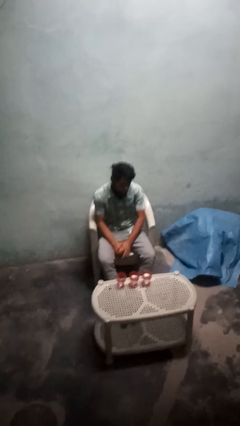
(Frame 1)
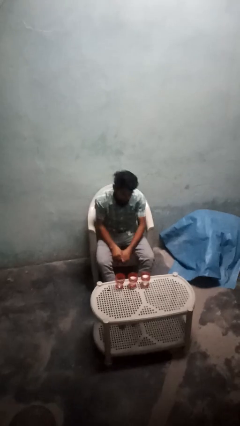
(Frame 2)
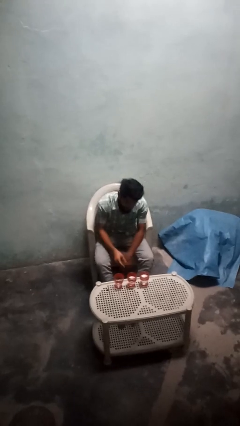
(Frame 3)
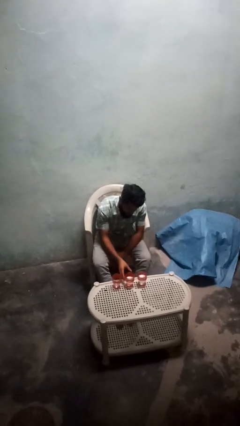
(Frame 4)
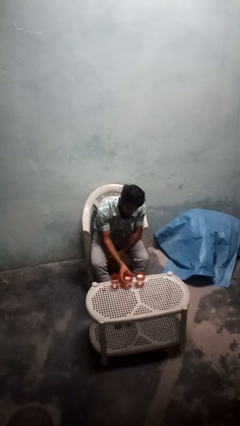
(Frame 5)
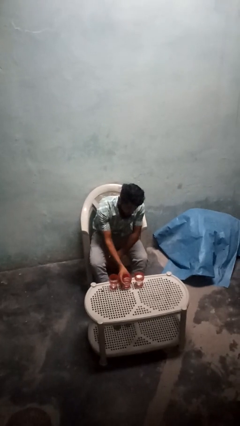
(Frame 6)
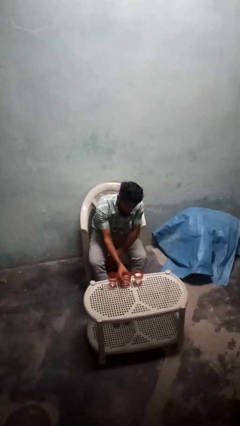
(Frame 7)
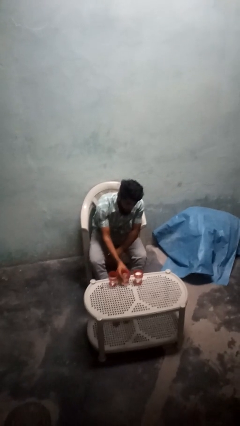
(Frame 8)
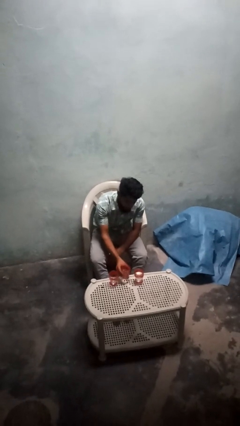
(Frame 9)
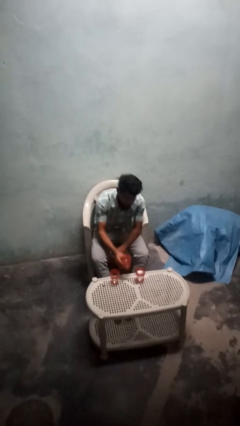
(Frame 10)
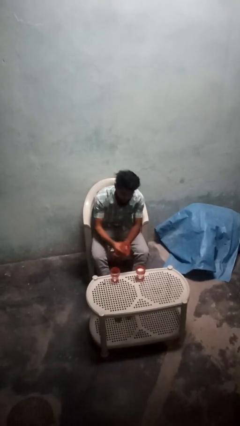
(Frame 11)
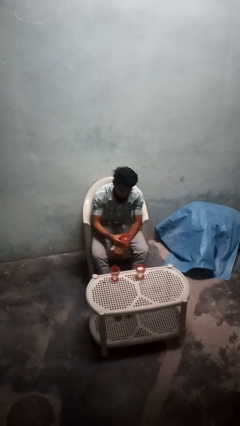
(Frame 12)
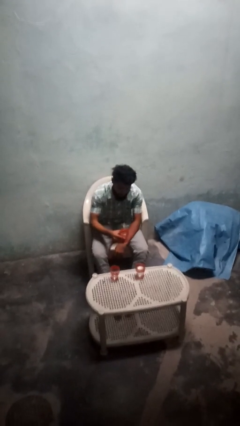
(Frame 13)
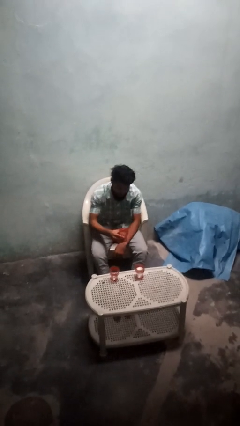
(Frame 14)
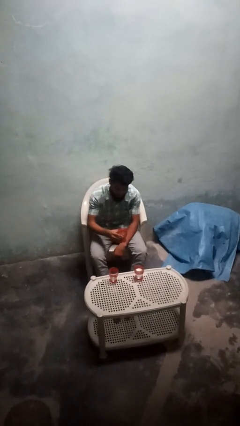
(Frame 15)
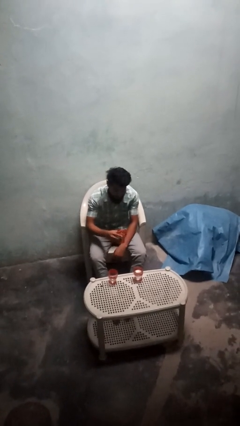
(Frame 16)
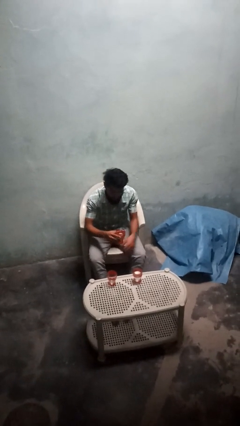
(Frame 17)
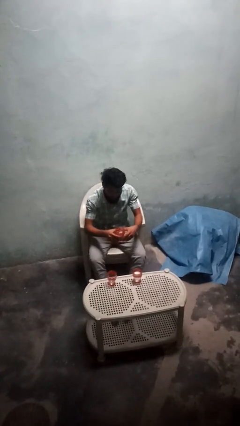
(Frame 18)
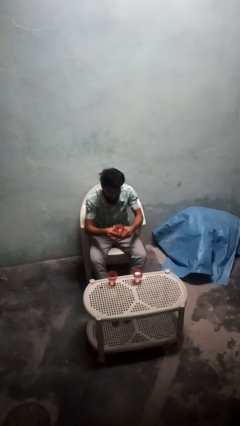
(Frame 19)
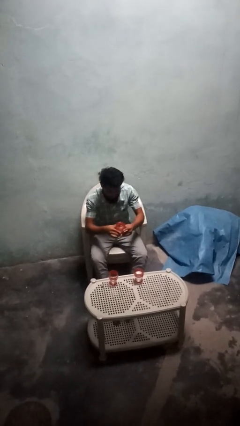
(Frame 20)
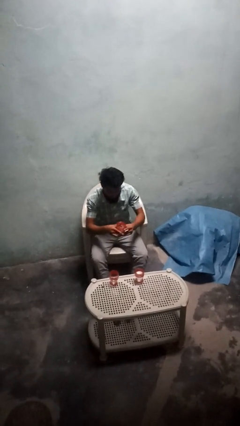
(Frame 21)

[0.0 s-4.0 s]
person picks up object from table

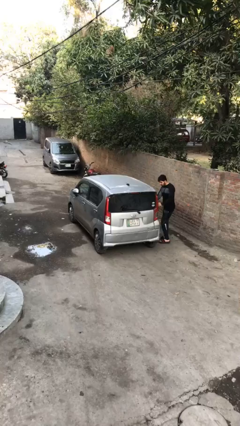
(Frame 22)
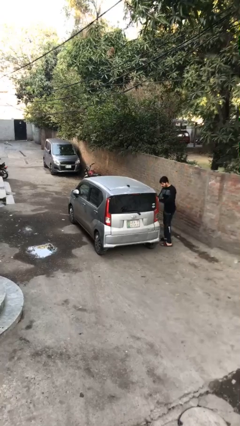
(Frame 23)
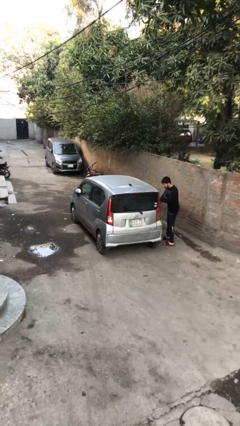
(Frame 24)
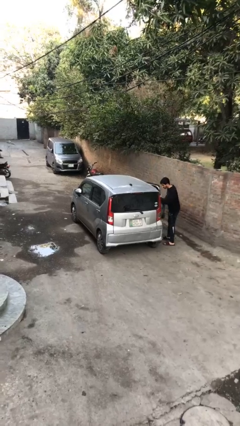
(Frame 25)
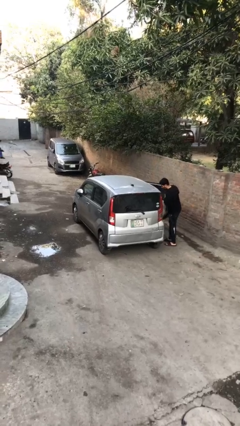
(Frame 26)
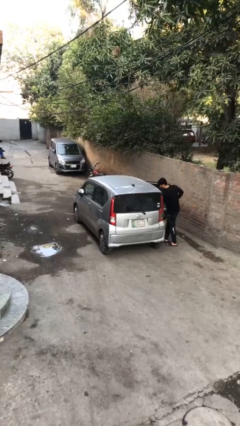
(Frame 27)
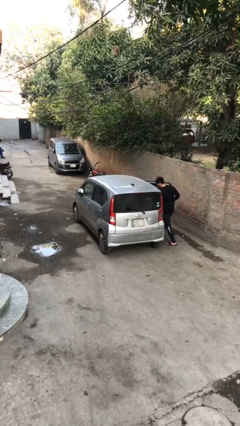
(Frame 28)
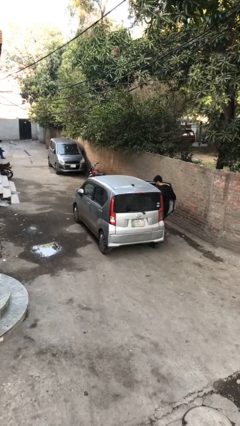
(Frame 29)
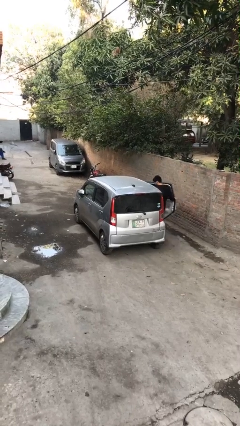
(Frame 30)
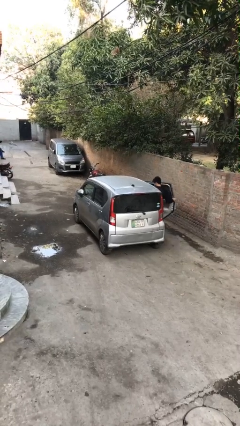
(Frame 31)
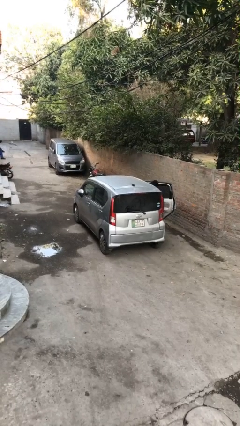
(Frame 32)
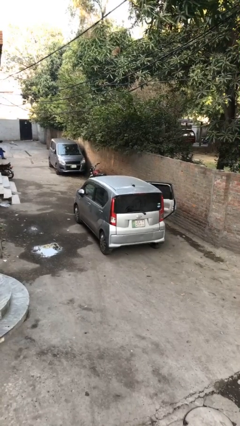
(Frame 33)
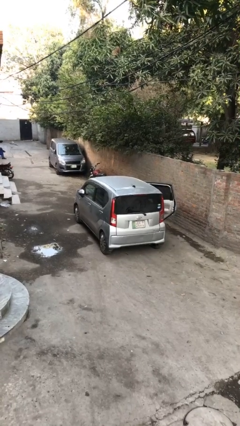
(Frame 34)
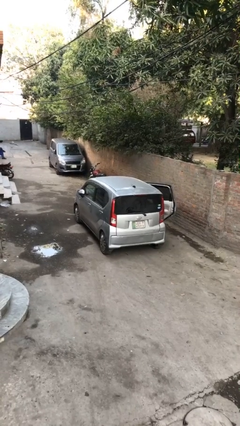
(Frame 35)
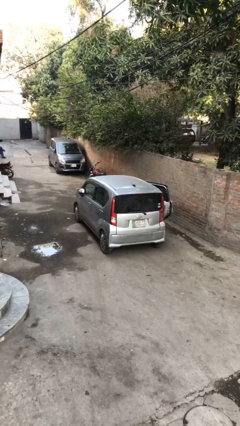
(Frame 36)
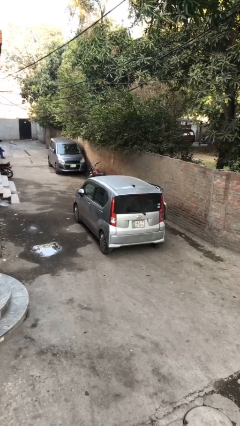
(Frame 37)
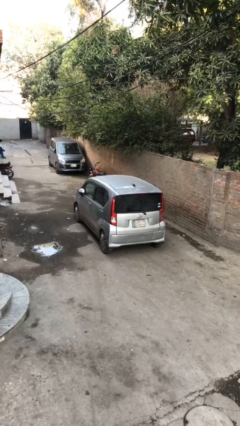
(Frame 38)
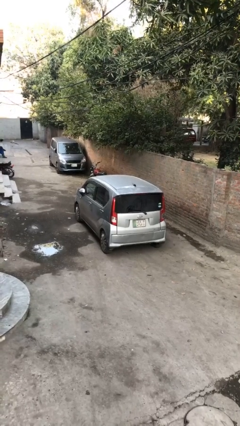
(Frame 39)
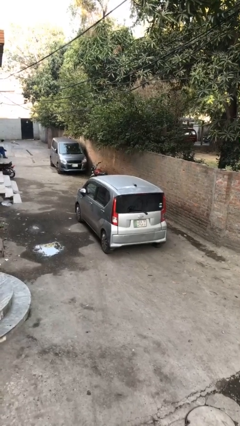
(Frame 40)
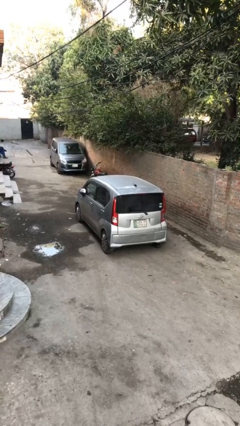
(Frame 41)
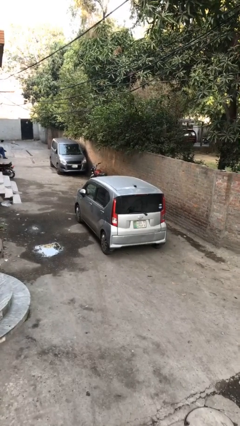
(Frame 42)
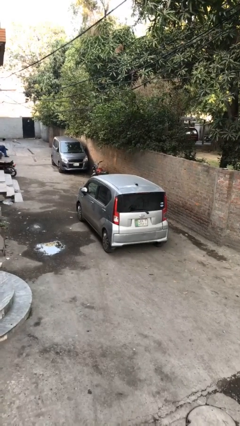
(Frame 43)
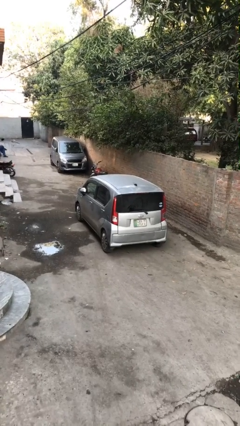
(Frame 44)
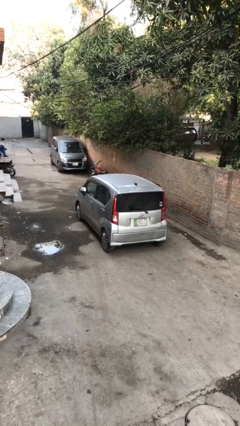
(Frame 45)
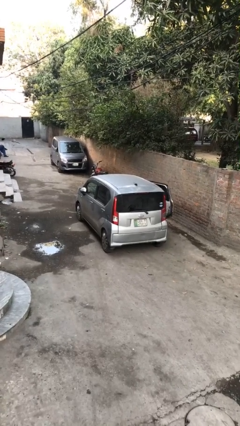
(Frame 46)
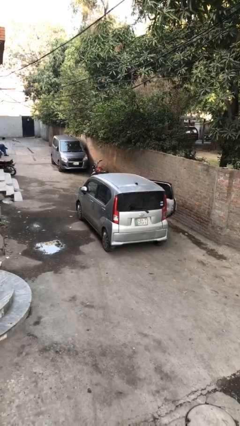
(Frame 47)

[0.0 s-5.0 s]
car picks up person

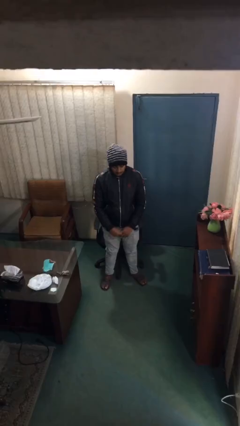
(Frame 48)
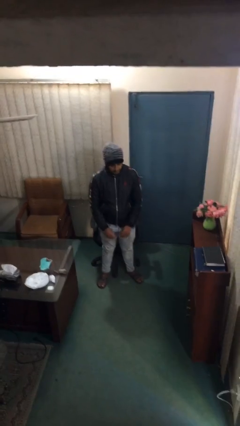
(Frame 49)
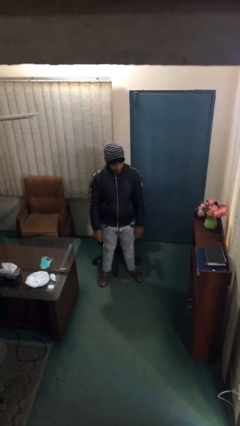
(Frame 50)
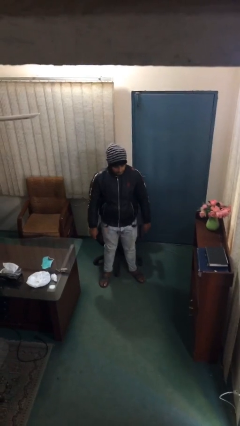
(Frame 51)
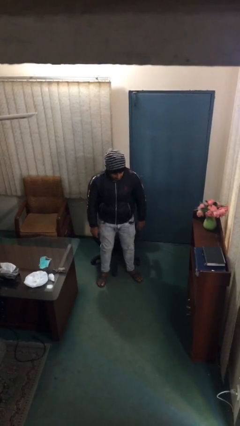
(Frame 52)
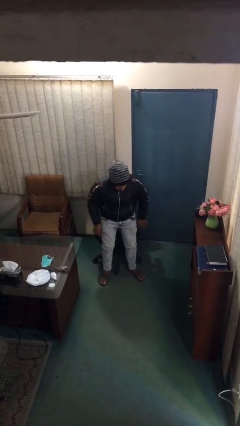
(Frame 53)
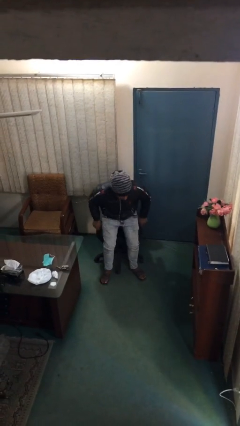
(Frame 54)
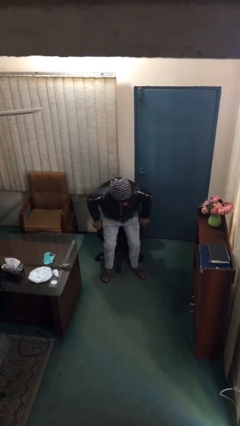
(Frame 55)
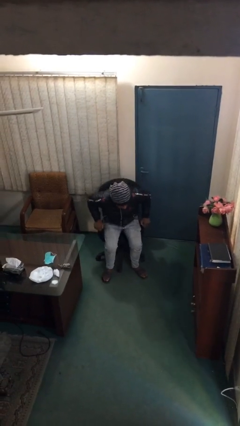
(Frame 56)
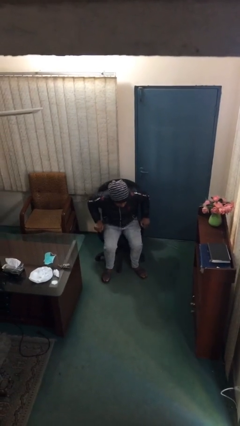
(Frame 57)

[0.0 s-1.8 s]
person sits down

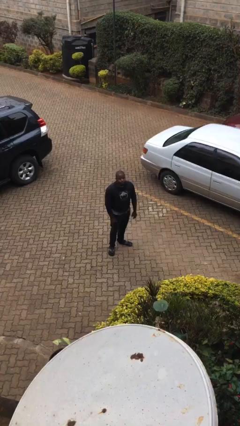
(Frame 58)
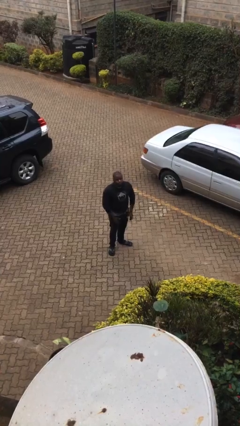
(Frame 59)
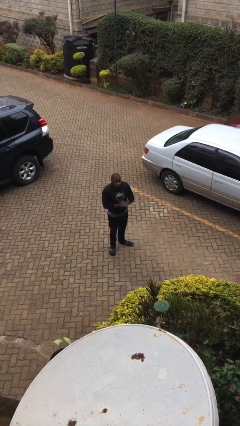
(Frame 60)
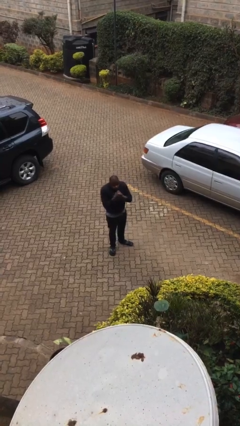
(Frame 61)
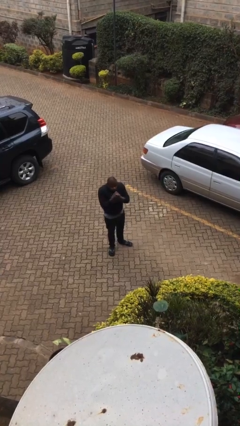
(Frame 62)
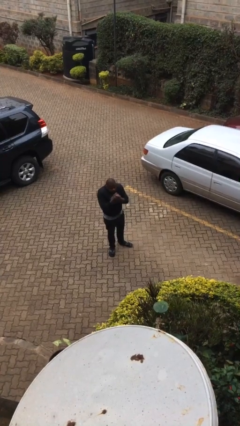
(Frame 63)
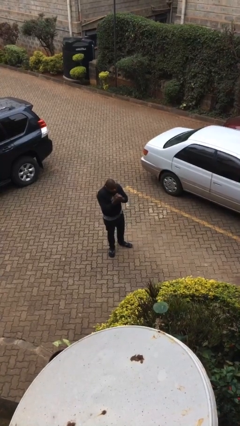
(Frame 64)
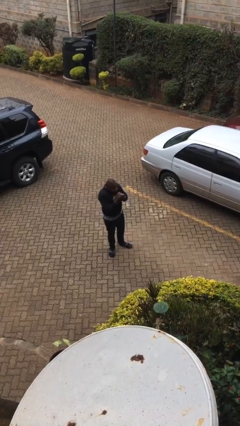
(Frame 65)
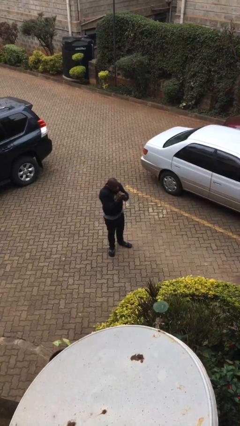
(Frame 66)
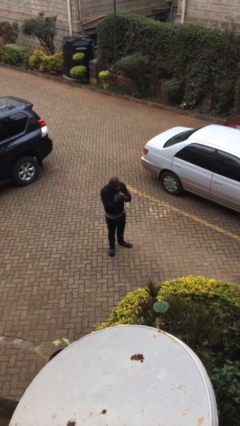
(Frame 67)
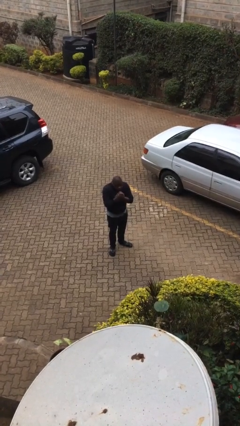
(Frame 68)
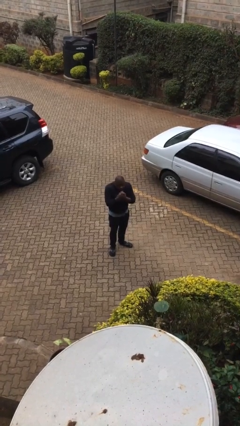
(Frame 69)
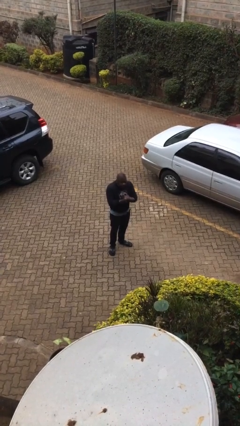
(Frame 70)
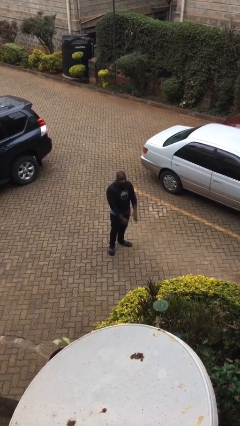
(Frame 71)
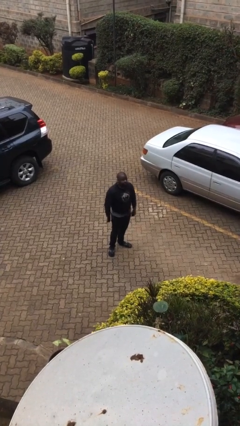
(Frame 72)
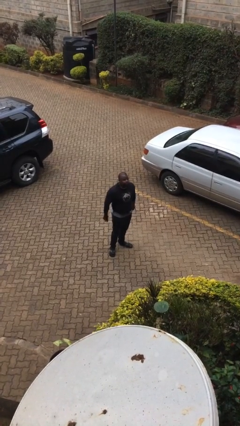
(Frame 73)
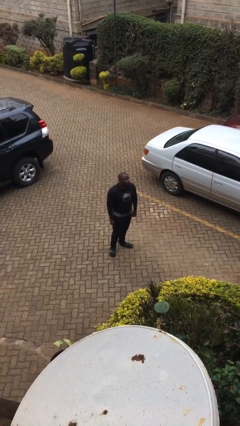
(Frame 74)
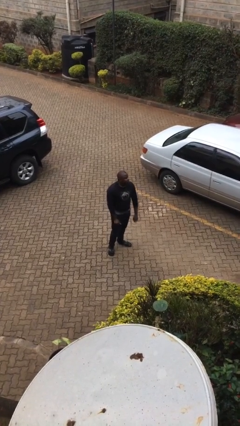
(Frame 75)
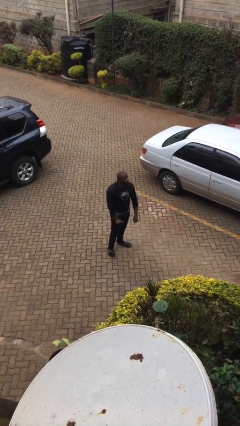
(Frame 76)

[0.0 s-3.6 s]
person blows into hands

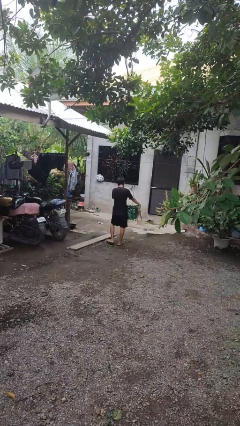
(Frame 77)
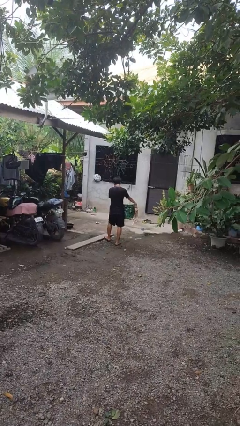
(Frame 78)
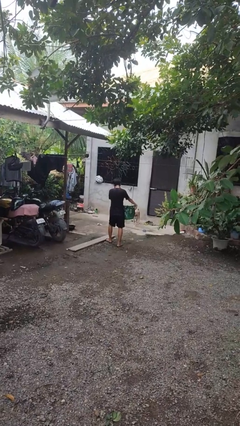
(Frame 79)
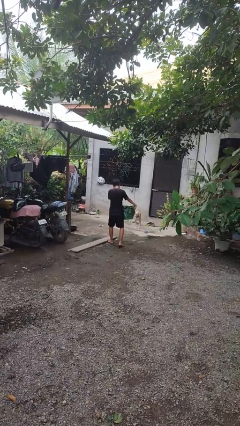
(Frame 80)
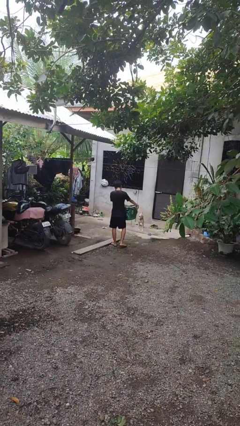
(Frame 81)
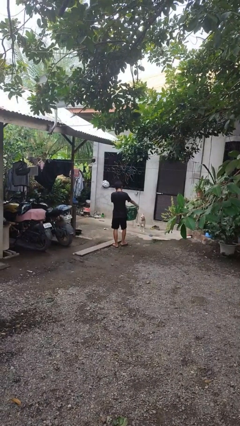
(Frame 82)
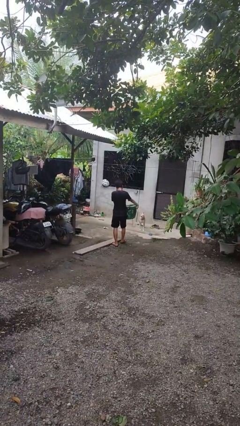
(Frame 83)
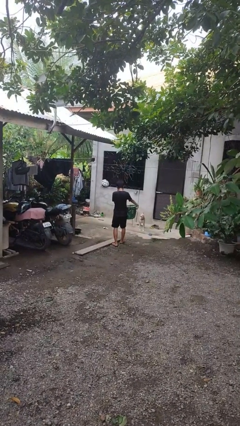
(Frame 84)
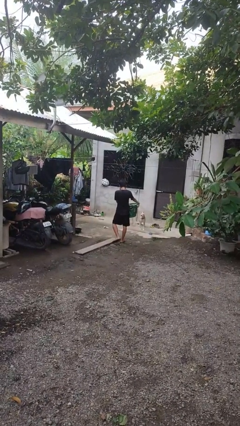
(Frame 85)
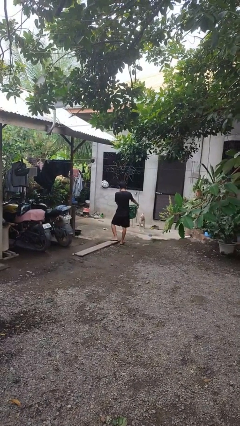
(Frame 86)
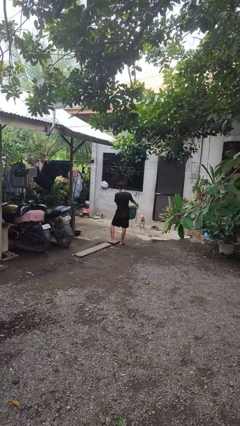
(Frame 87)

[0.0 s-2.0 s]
person carries laundry basket

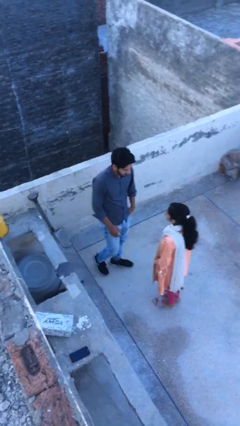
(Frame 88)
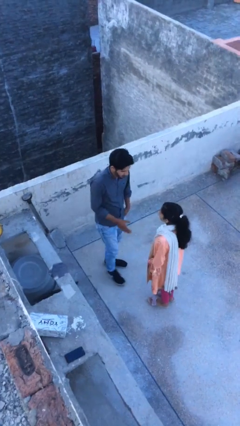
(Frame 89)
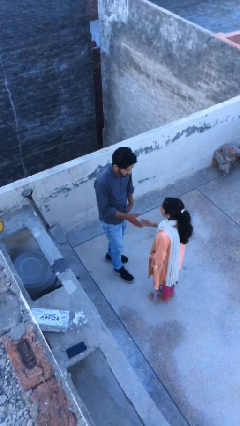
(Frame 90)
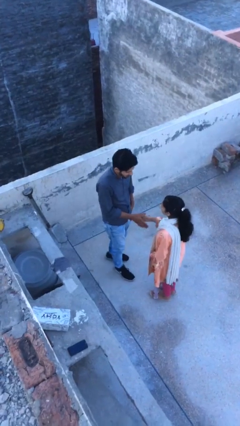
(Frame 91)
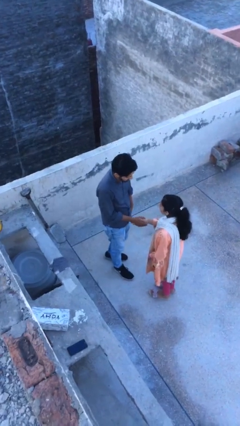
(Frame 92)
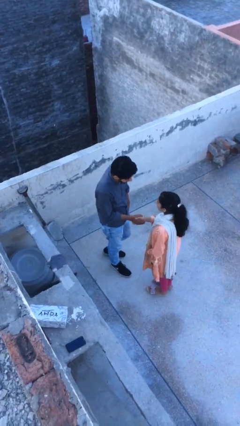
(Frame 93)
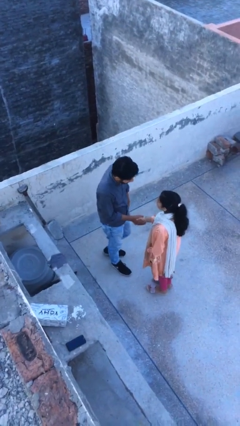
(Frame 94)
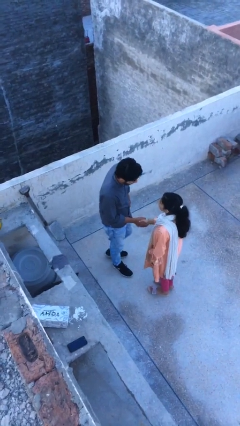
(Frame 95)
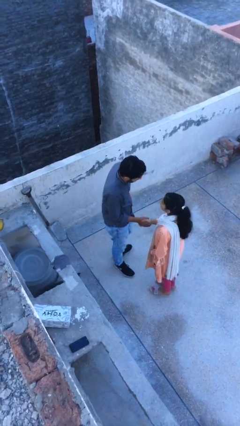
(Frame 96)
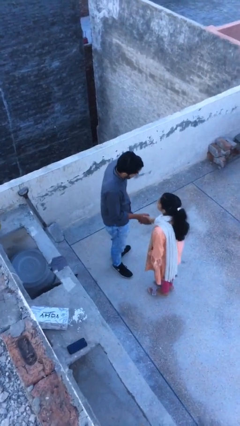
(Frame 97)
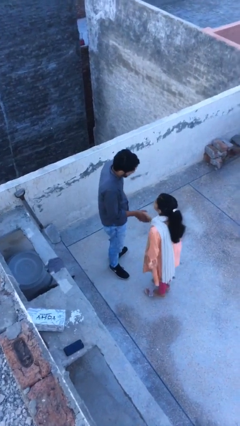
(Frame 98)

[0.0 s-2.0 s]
person shakes hand
